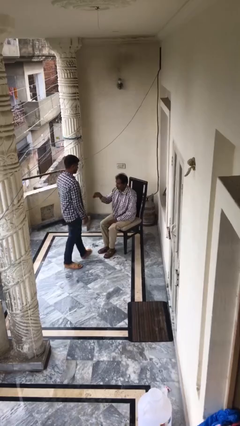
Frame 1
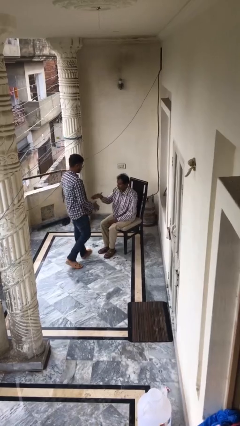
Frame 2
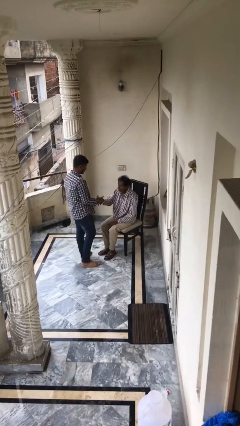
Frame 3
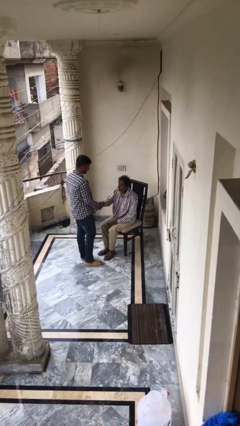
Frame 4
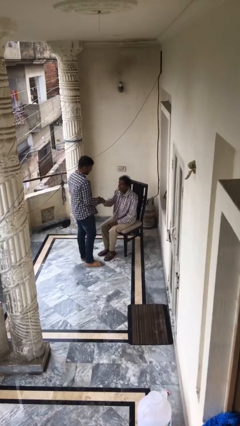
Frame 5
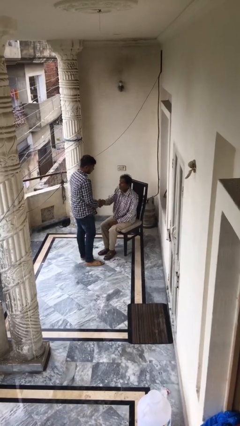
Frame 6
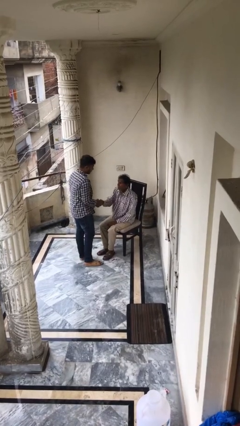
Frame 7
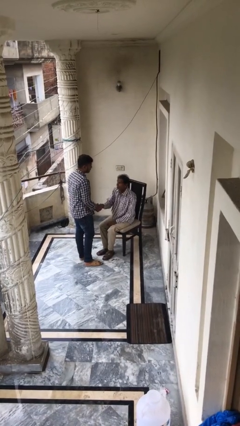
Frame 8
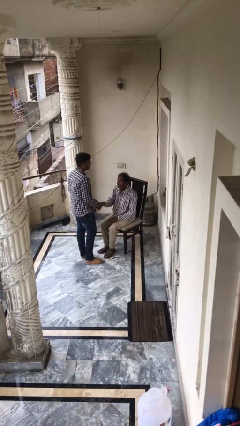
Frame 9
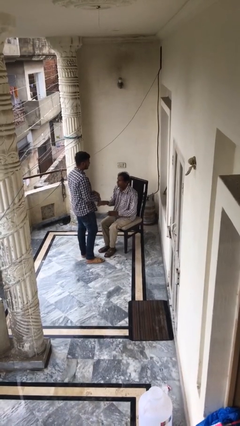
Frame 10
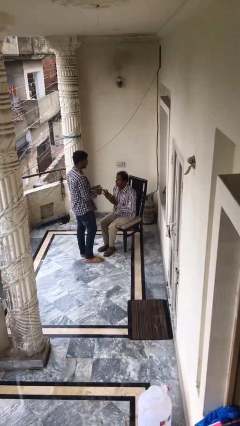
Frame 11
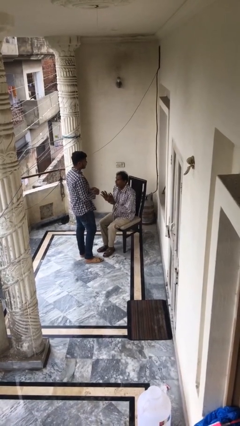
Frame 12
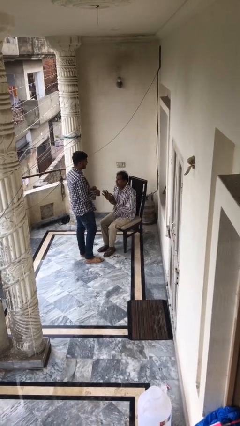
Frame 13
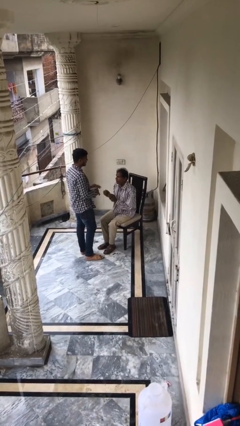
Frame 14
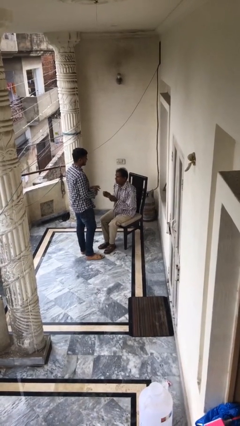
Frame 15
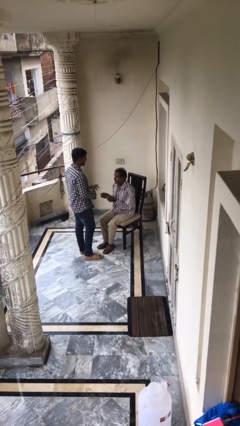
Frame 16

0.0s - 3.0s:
person shakes hand

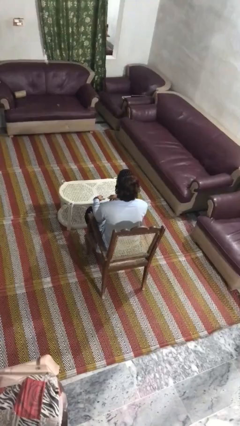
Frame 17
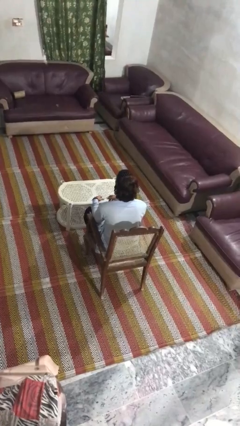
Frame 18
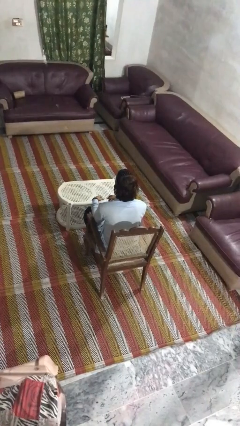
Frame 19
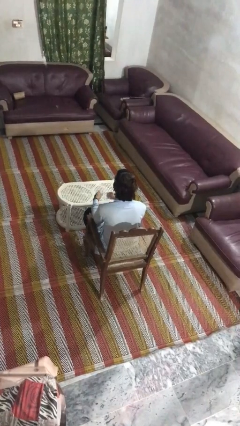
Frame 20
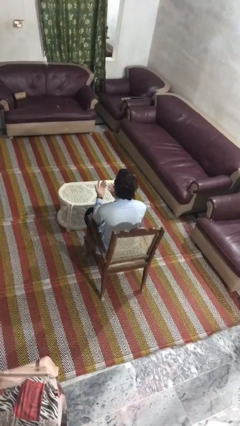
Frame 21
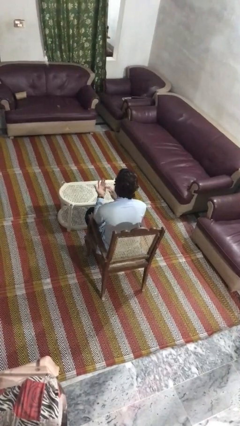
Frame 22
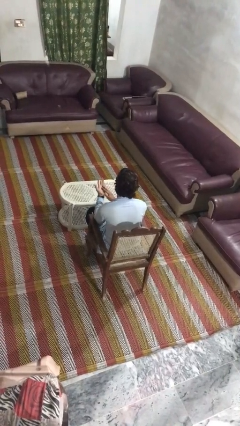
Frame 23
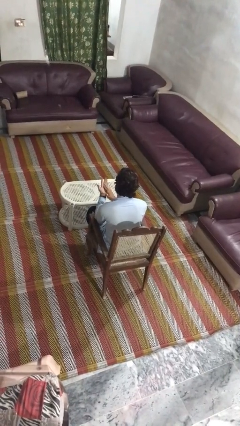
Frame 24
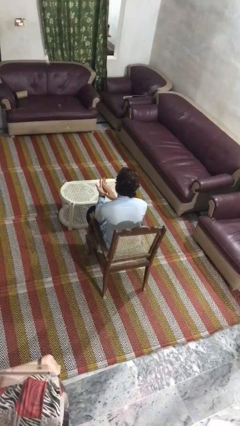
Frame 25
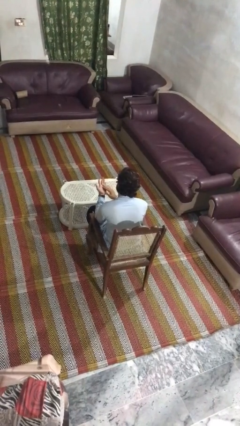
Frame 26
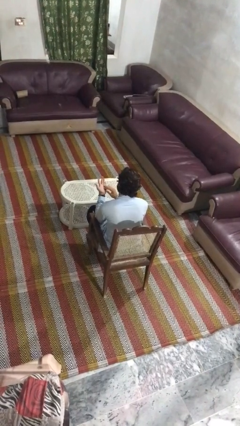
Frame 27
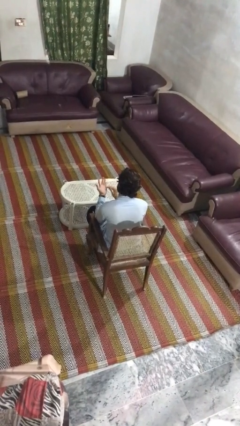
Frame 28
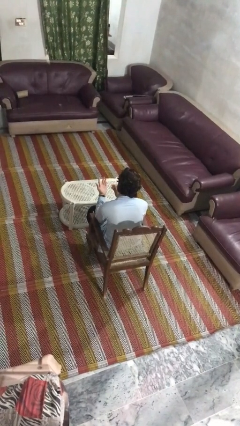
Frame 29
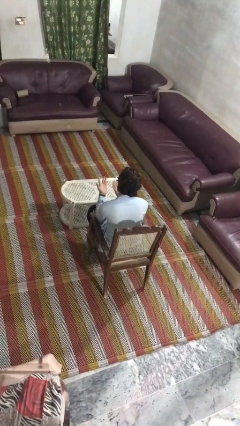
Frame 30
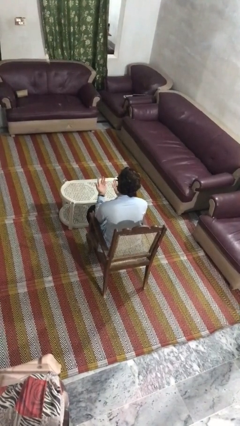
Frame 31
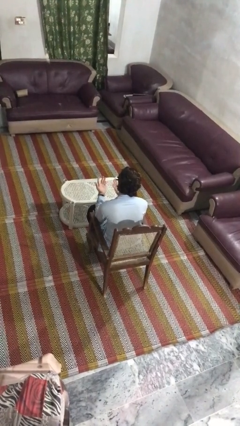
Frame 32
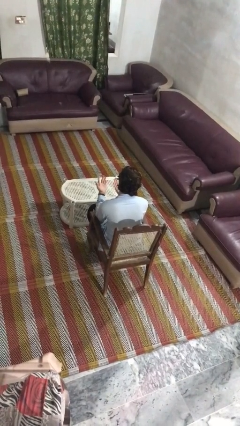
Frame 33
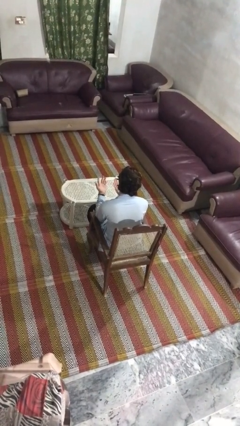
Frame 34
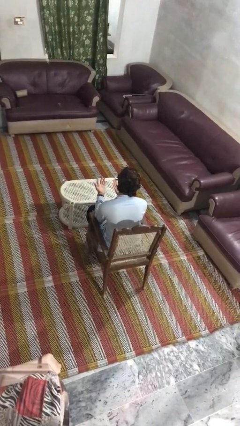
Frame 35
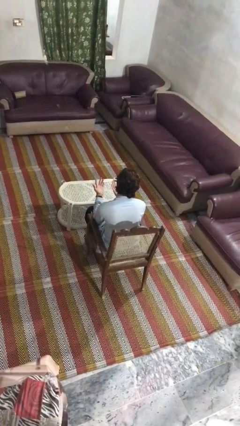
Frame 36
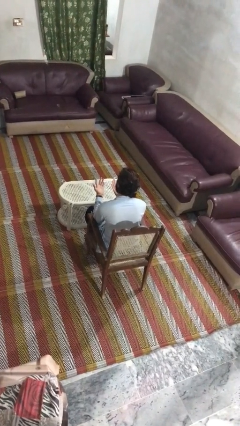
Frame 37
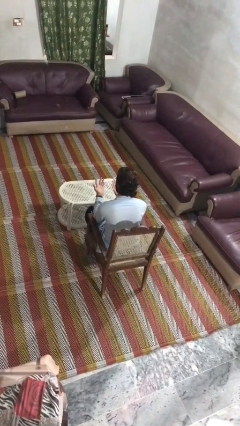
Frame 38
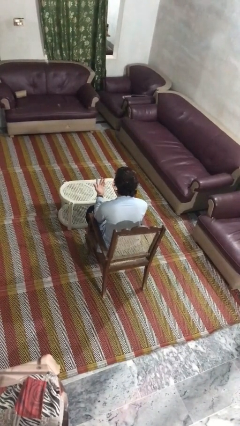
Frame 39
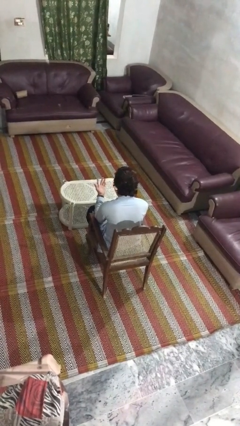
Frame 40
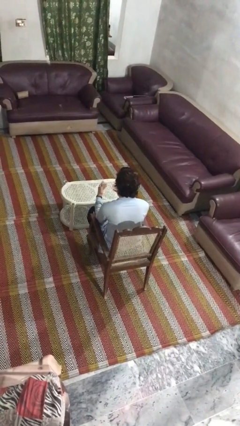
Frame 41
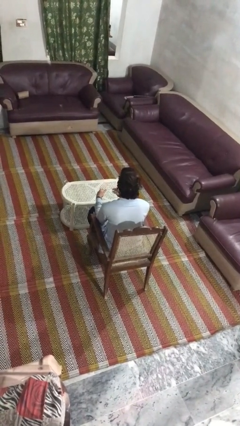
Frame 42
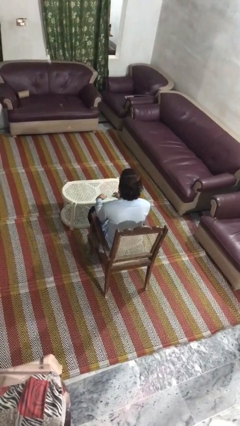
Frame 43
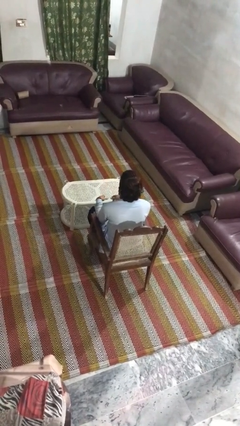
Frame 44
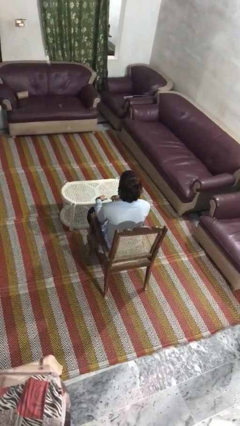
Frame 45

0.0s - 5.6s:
person looks at hands in lap

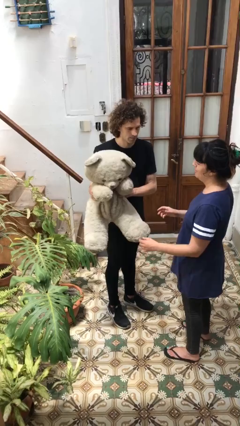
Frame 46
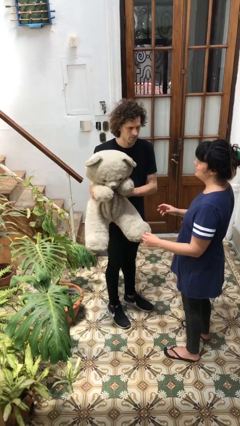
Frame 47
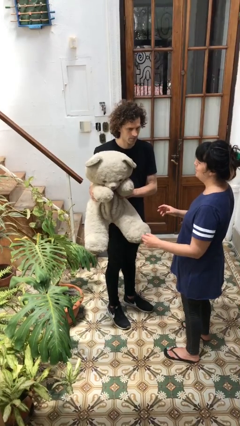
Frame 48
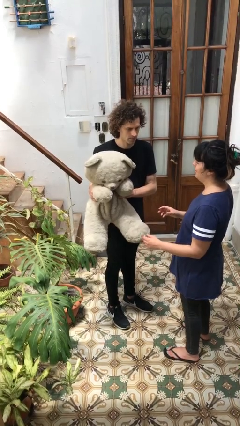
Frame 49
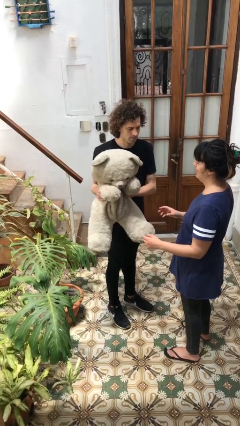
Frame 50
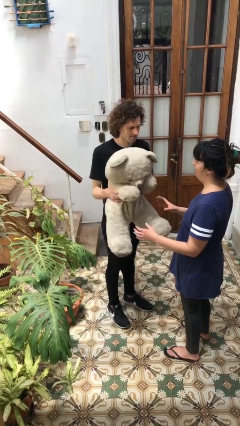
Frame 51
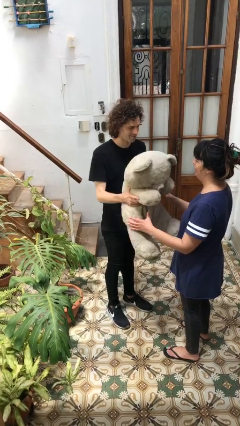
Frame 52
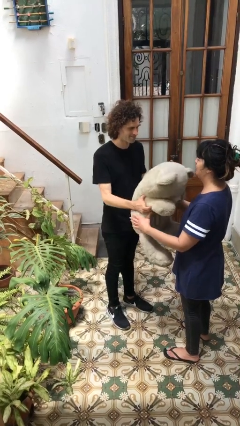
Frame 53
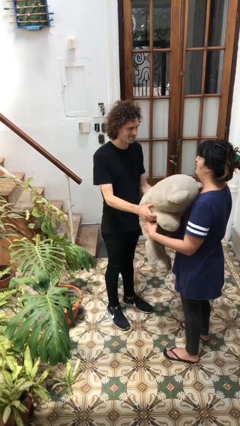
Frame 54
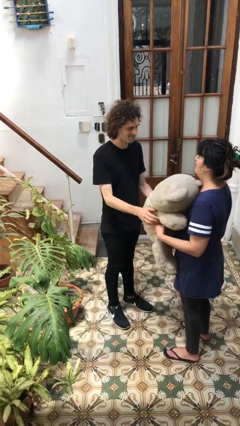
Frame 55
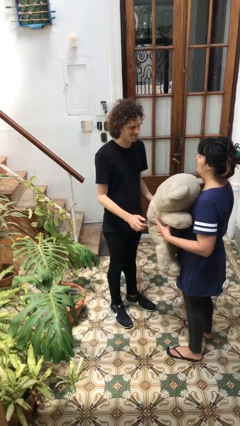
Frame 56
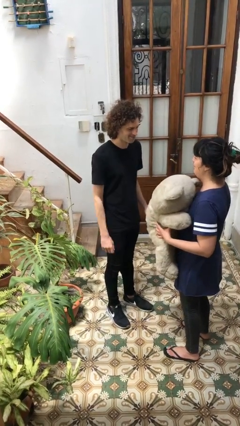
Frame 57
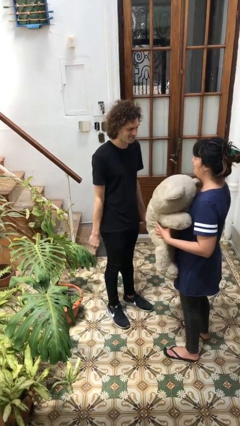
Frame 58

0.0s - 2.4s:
person transfers object to person

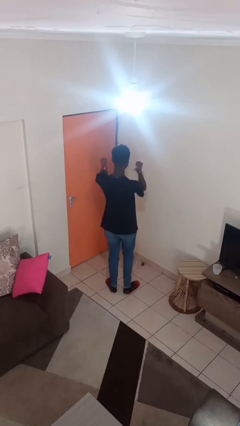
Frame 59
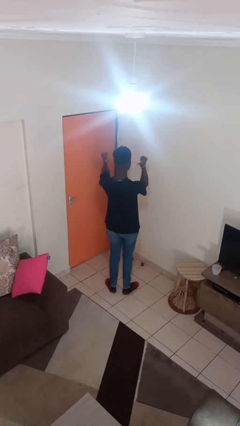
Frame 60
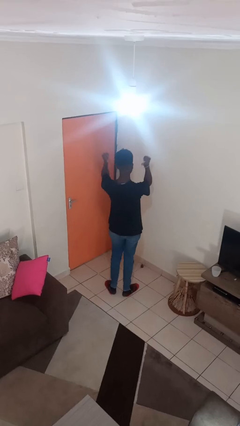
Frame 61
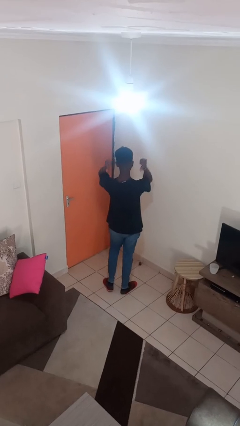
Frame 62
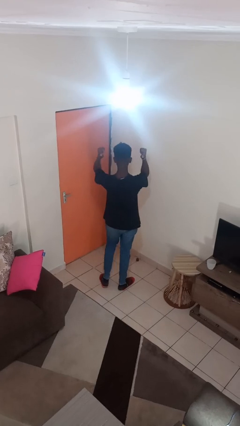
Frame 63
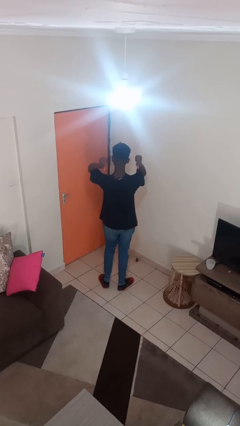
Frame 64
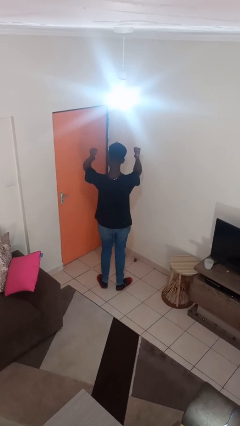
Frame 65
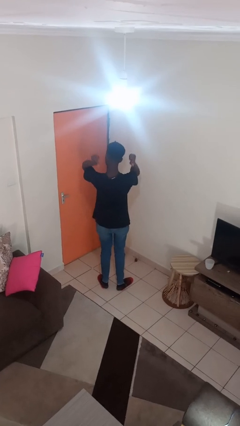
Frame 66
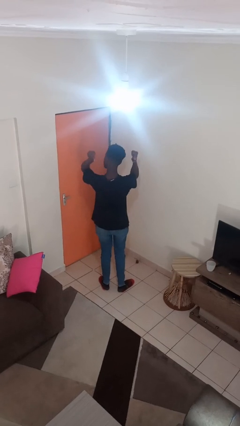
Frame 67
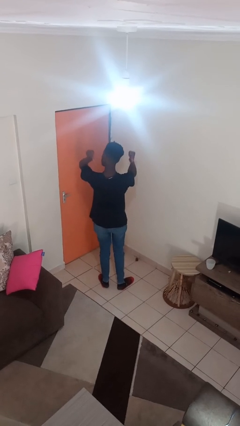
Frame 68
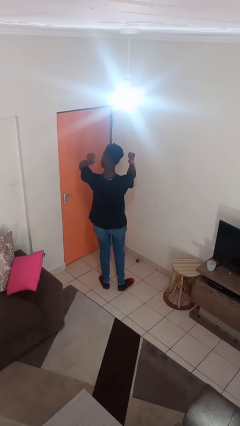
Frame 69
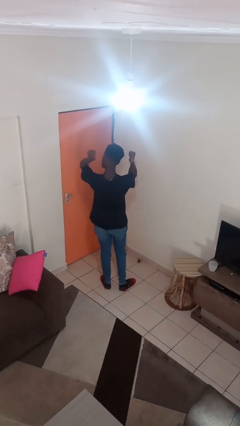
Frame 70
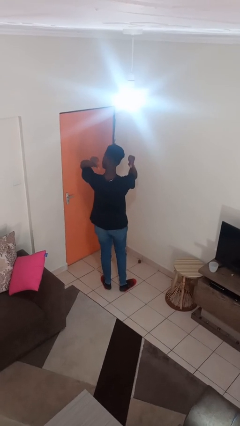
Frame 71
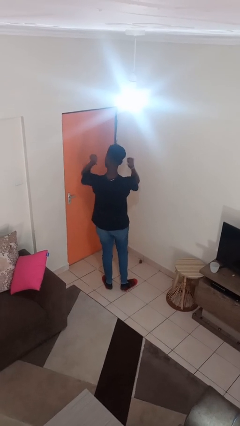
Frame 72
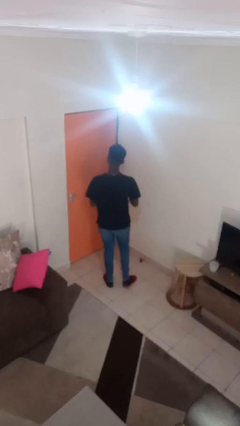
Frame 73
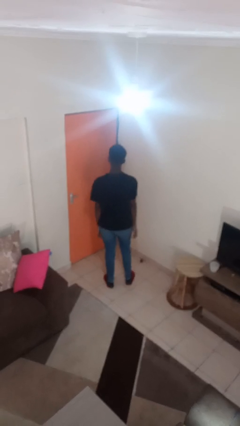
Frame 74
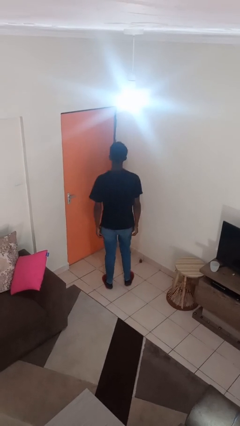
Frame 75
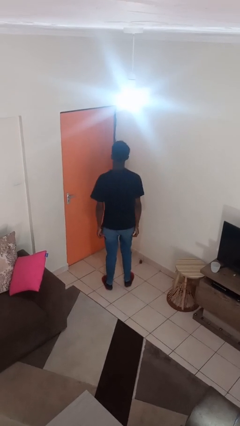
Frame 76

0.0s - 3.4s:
person gestures behind me

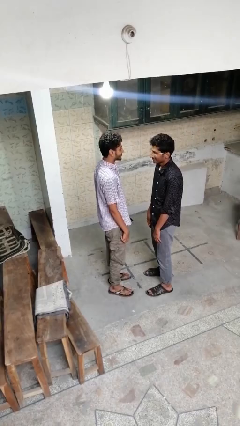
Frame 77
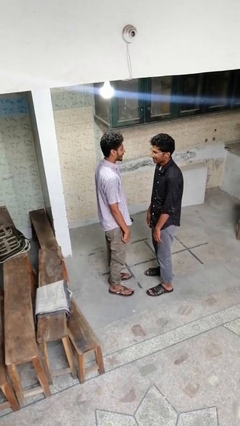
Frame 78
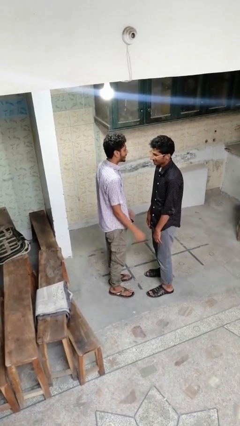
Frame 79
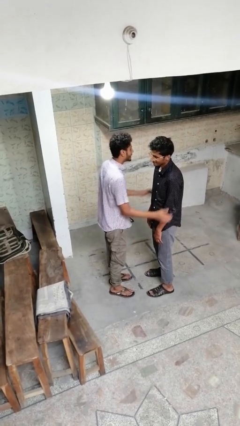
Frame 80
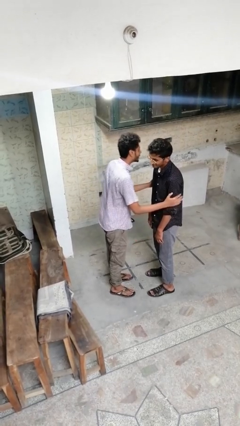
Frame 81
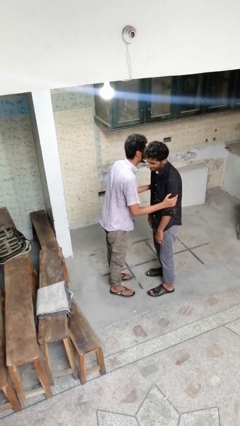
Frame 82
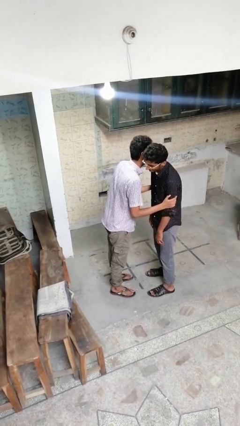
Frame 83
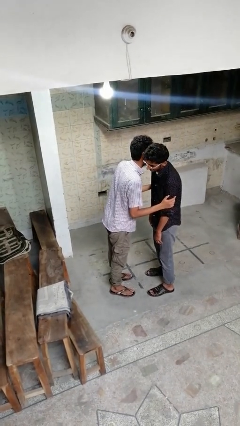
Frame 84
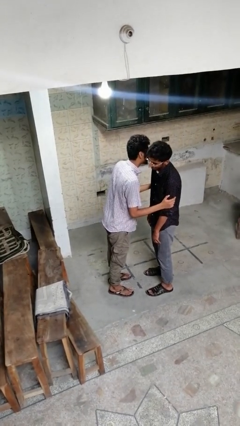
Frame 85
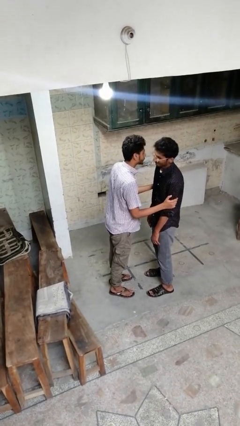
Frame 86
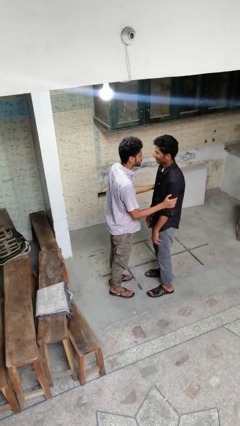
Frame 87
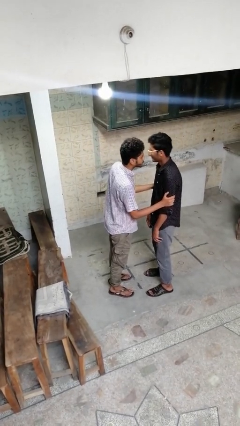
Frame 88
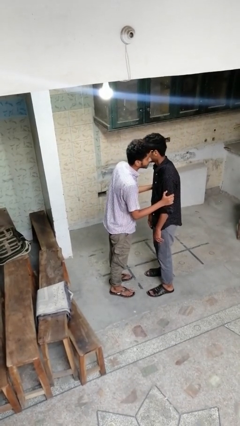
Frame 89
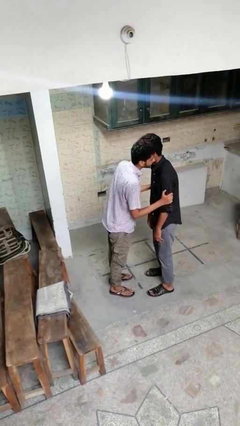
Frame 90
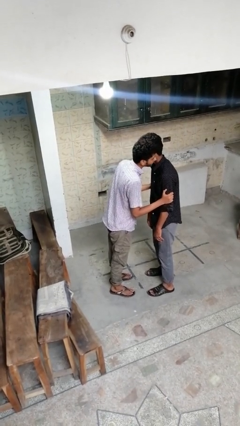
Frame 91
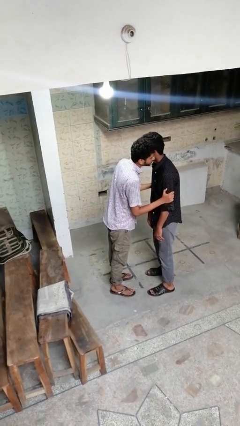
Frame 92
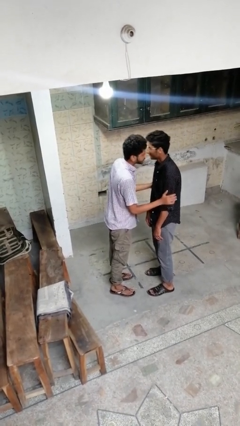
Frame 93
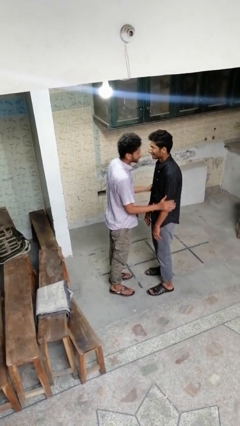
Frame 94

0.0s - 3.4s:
person kisses cheek of person
